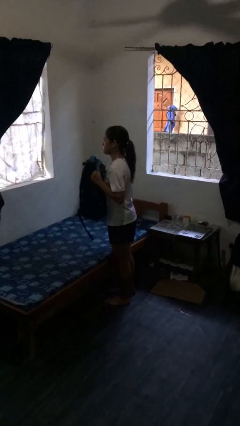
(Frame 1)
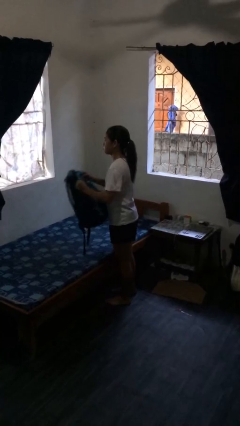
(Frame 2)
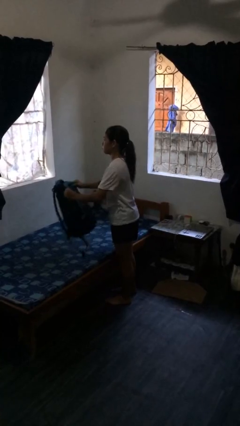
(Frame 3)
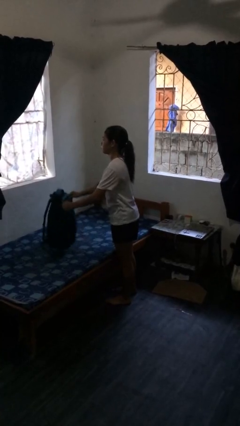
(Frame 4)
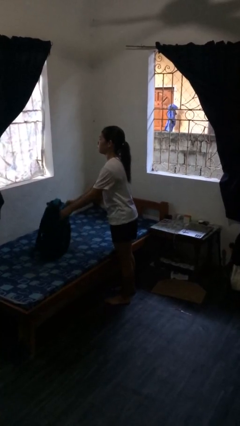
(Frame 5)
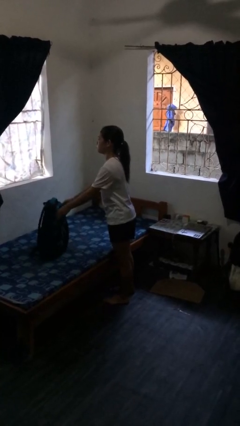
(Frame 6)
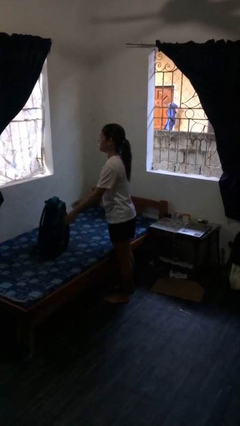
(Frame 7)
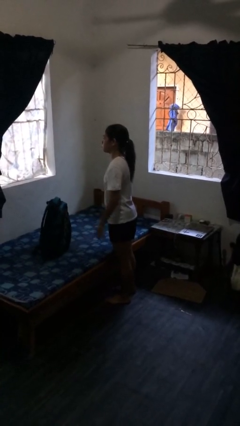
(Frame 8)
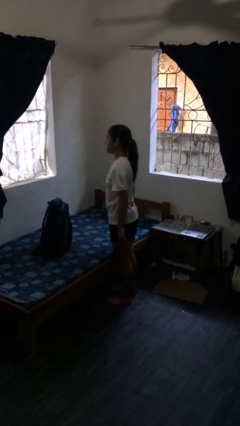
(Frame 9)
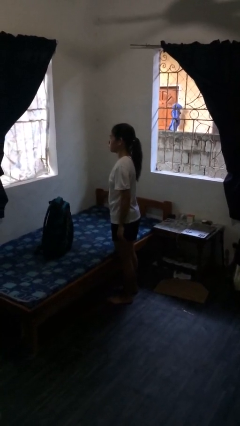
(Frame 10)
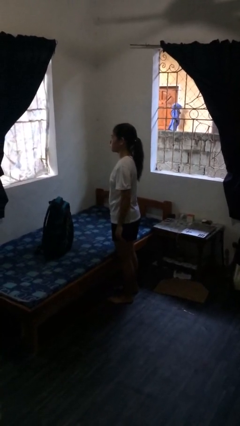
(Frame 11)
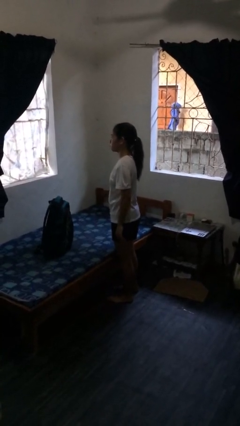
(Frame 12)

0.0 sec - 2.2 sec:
person puts down object on bed

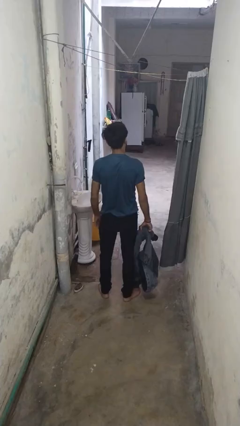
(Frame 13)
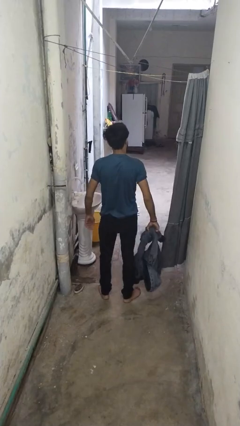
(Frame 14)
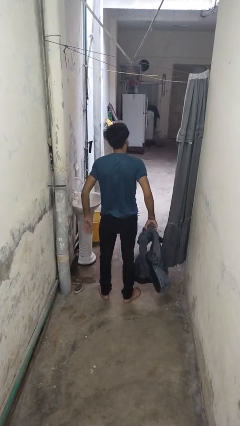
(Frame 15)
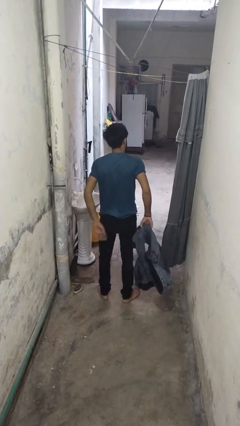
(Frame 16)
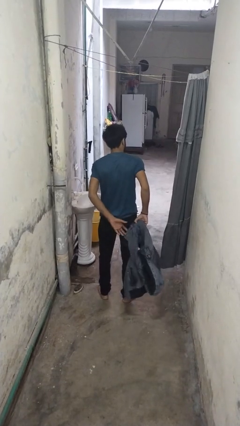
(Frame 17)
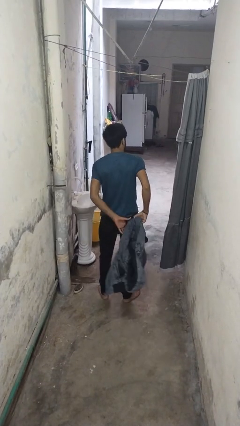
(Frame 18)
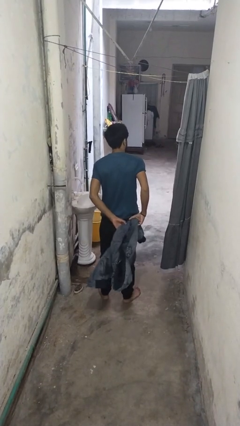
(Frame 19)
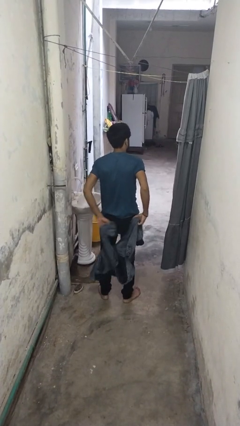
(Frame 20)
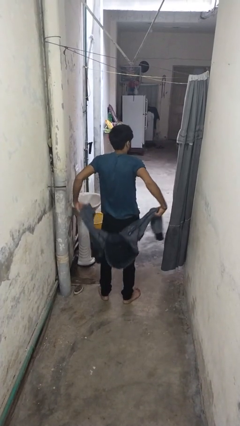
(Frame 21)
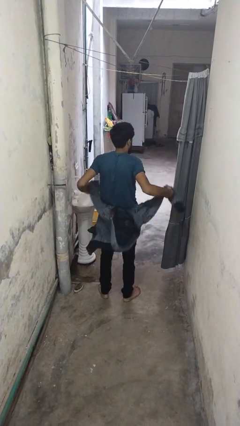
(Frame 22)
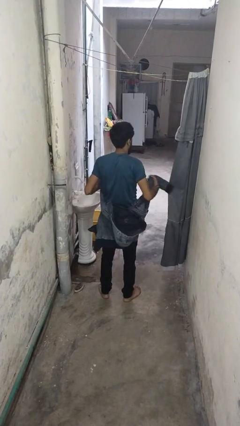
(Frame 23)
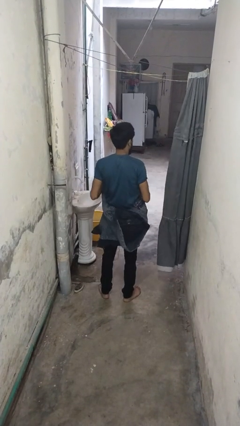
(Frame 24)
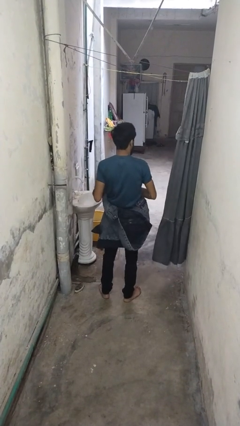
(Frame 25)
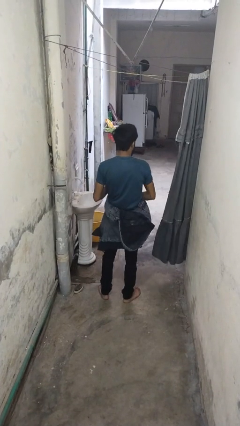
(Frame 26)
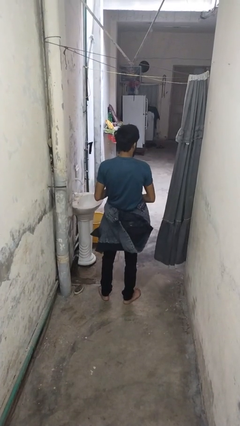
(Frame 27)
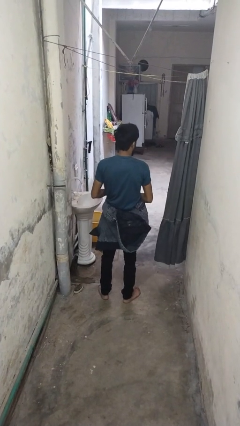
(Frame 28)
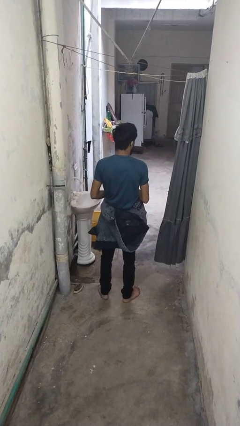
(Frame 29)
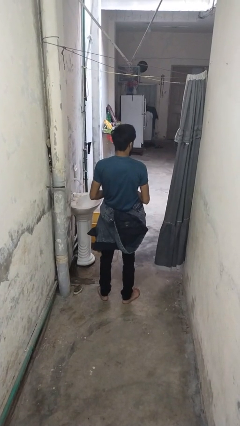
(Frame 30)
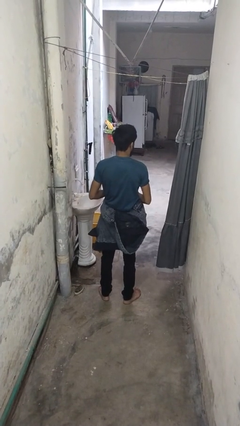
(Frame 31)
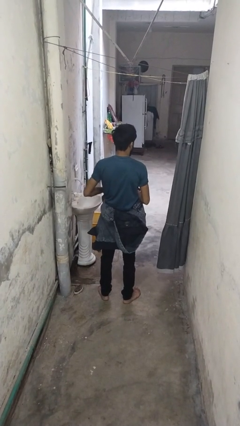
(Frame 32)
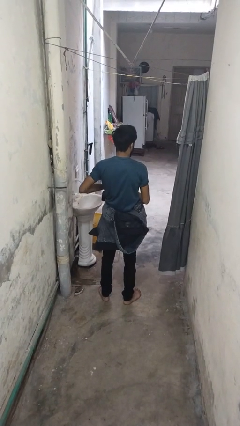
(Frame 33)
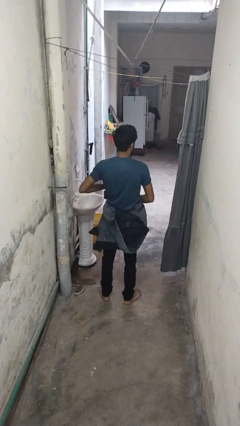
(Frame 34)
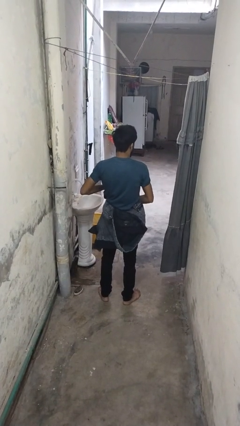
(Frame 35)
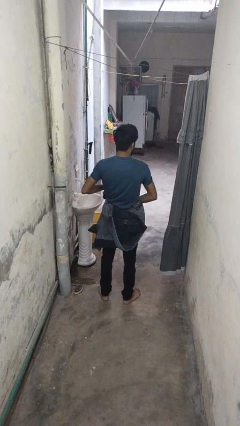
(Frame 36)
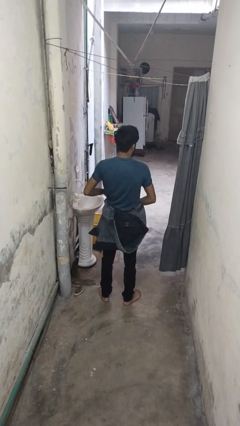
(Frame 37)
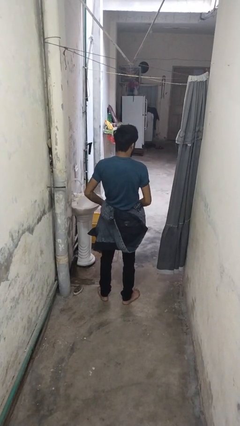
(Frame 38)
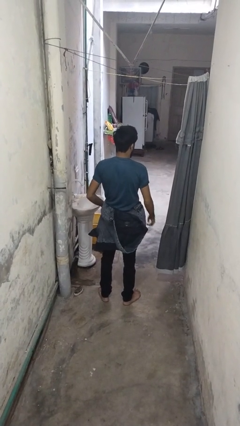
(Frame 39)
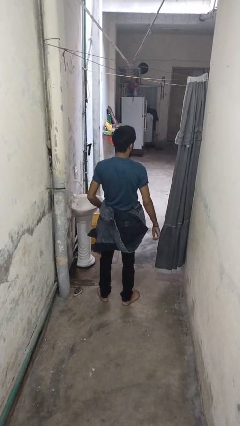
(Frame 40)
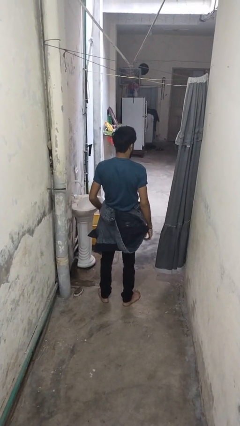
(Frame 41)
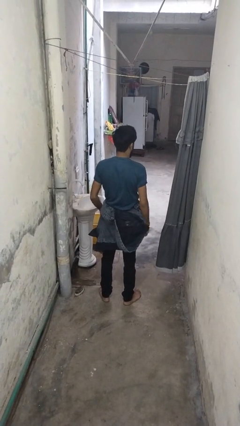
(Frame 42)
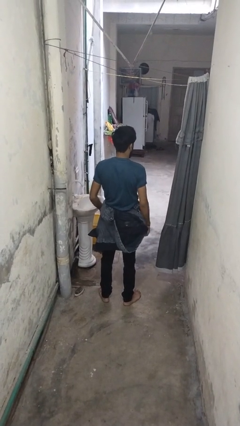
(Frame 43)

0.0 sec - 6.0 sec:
person ties jacket around waist

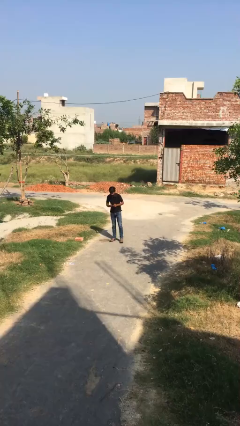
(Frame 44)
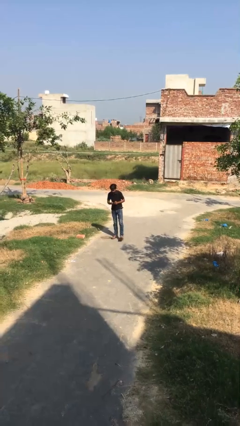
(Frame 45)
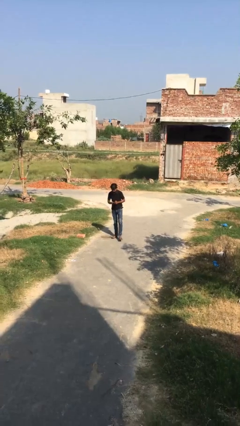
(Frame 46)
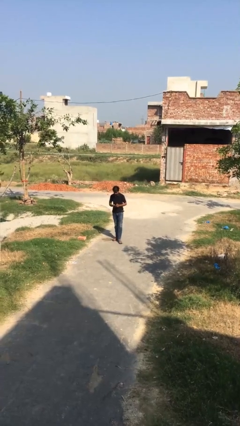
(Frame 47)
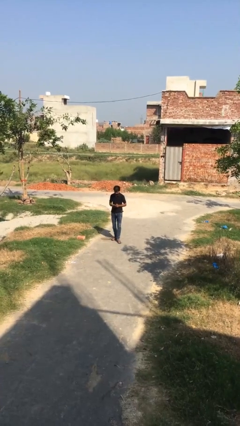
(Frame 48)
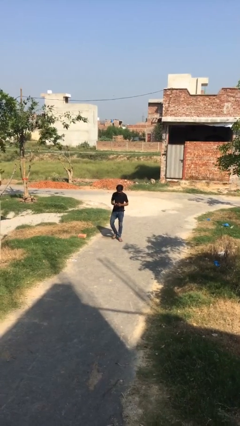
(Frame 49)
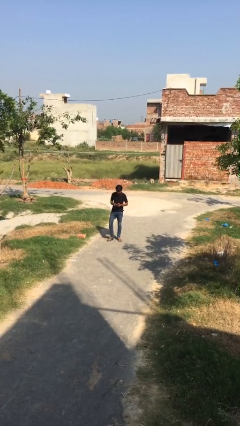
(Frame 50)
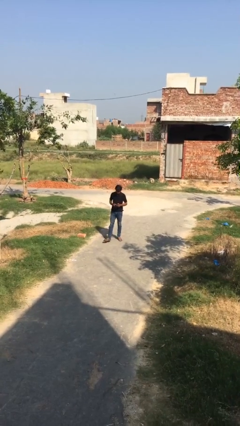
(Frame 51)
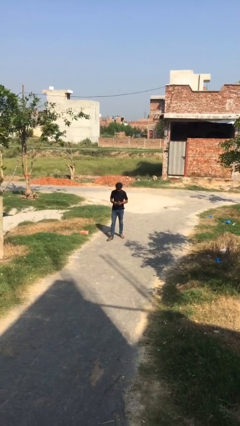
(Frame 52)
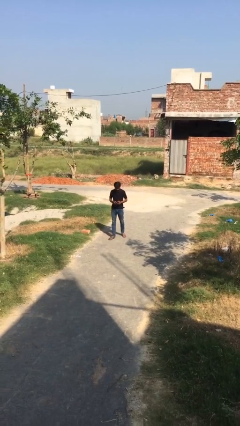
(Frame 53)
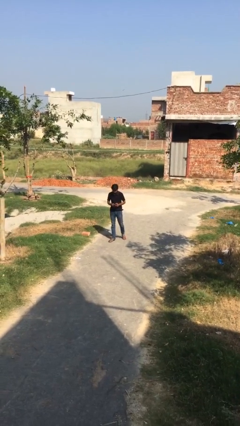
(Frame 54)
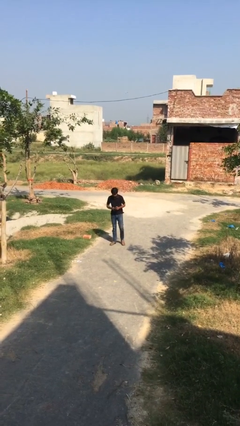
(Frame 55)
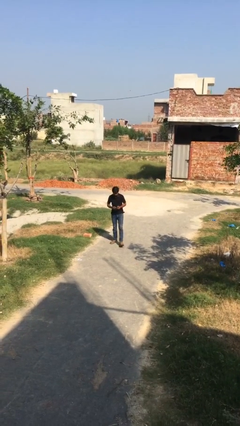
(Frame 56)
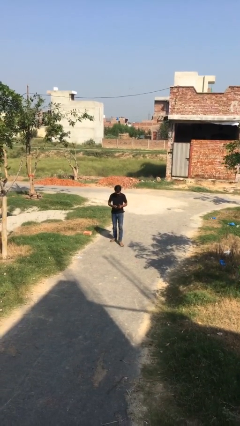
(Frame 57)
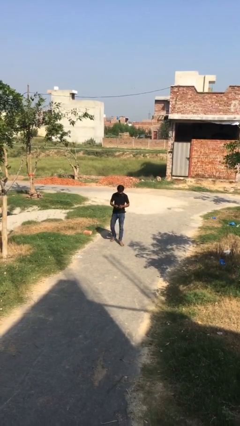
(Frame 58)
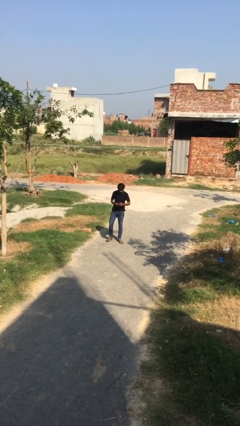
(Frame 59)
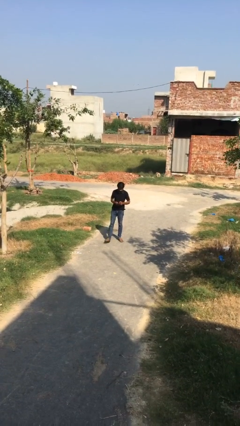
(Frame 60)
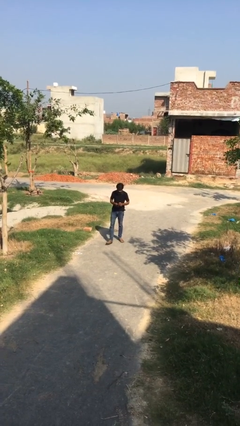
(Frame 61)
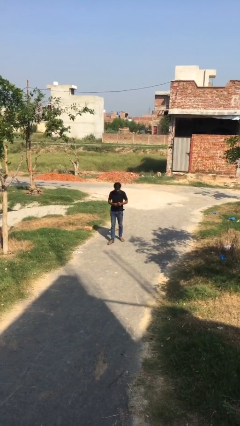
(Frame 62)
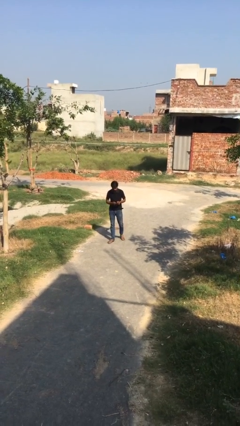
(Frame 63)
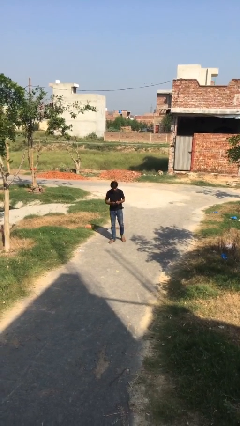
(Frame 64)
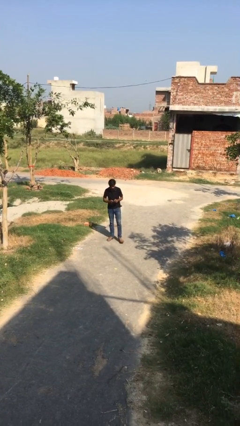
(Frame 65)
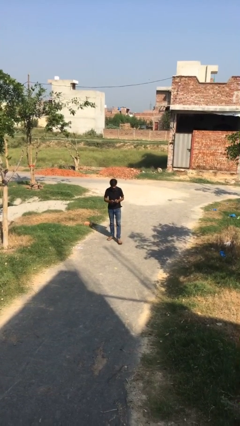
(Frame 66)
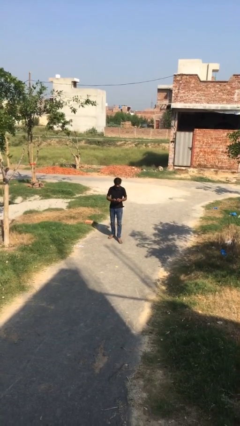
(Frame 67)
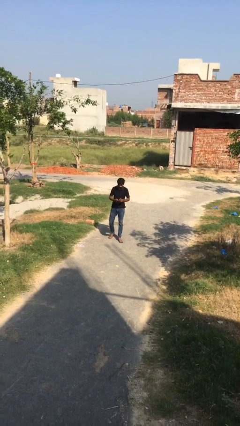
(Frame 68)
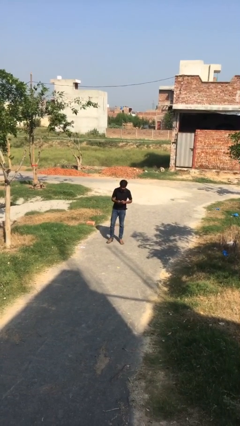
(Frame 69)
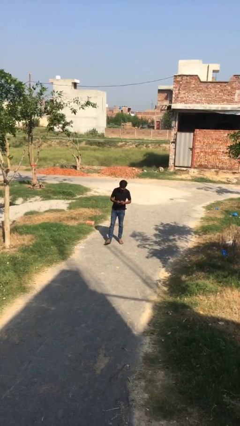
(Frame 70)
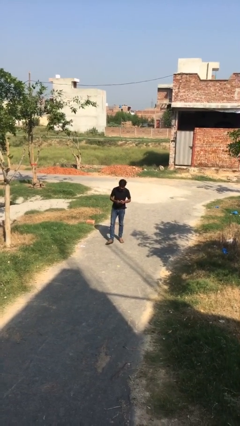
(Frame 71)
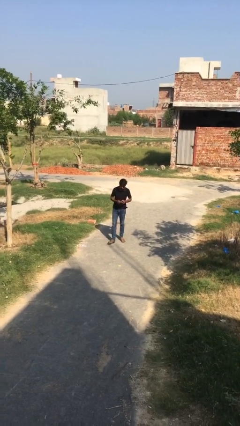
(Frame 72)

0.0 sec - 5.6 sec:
person texts on phone

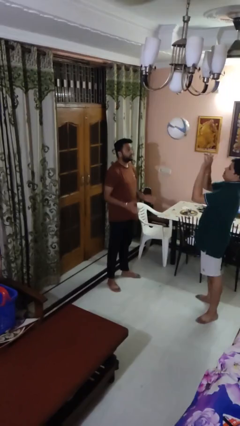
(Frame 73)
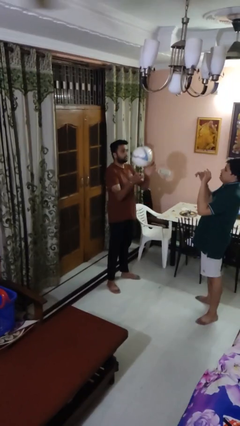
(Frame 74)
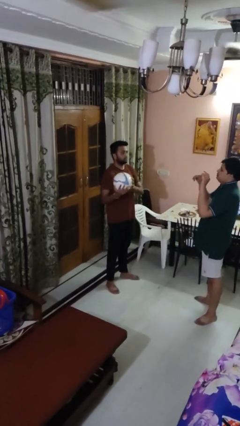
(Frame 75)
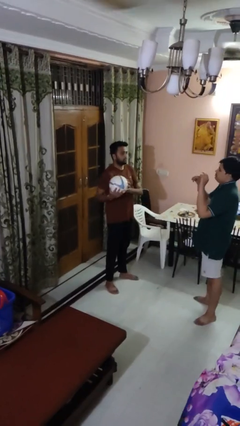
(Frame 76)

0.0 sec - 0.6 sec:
person catches object from person

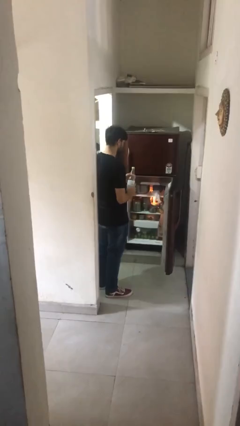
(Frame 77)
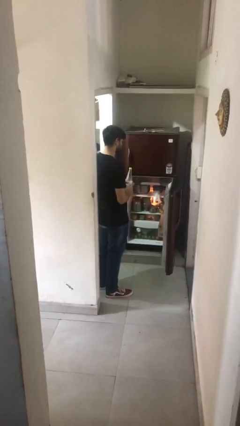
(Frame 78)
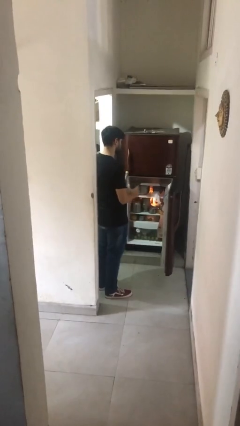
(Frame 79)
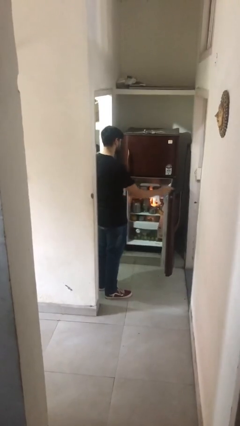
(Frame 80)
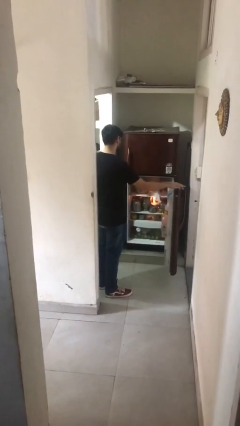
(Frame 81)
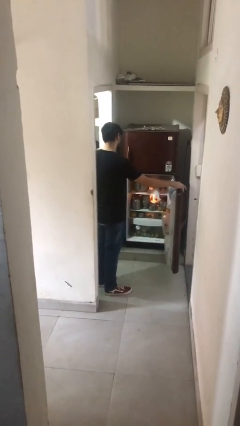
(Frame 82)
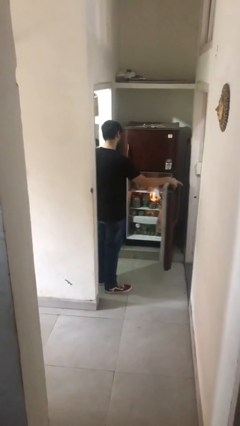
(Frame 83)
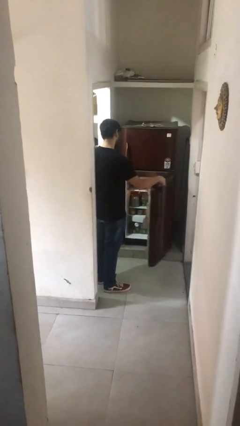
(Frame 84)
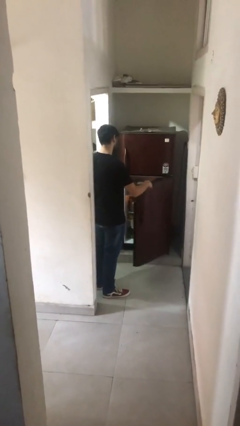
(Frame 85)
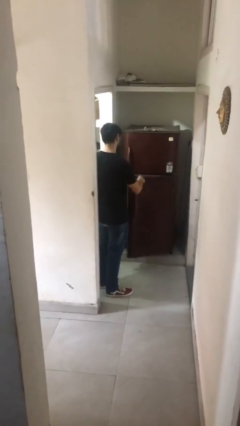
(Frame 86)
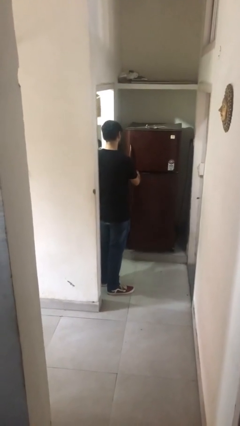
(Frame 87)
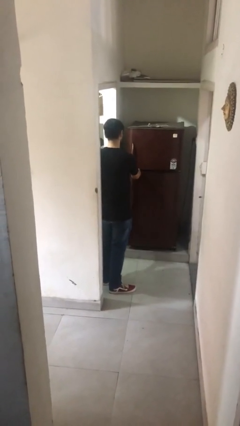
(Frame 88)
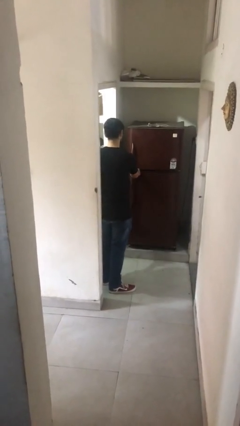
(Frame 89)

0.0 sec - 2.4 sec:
person closes refrigerator

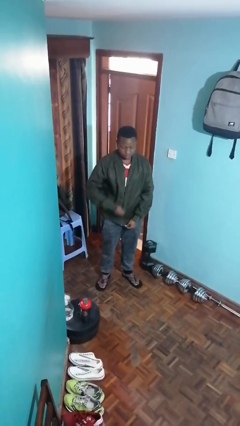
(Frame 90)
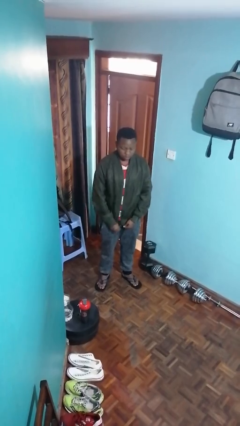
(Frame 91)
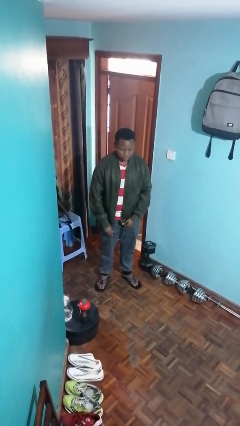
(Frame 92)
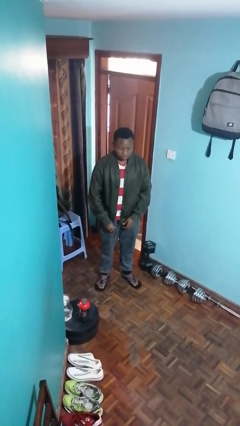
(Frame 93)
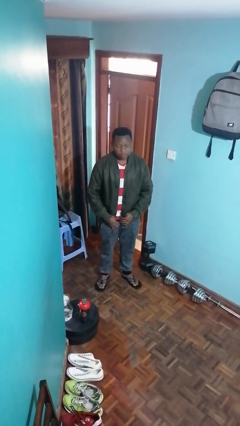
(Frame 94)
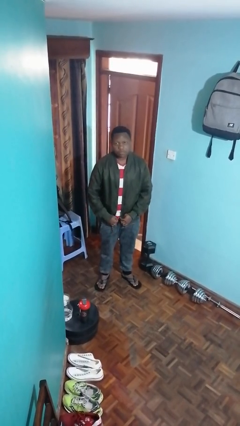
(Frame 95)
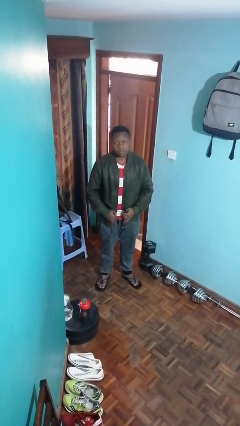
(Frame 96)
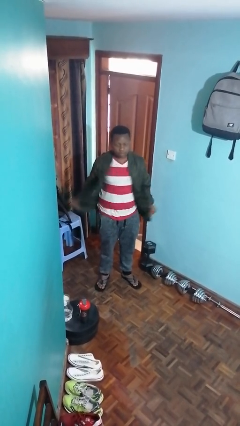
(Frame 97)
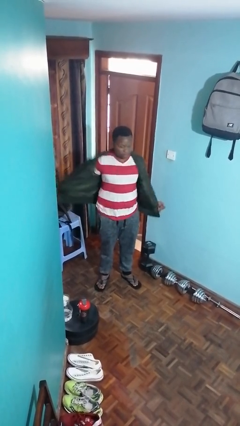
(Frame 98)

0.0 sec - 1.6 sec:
person unzips jacket
